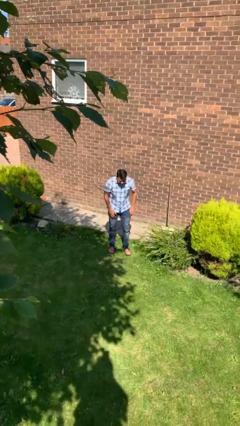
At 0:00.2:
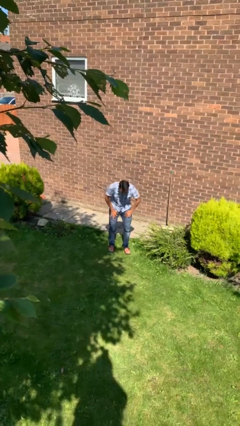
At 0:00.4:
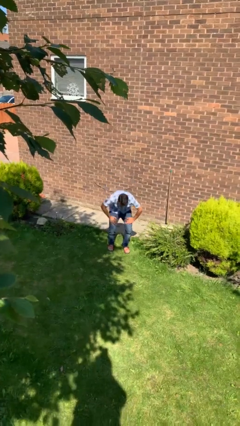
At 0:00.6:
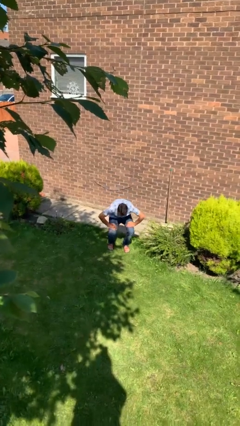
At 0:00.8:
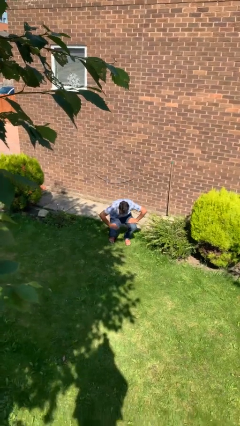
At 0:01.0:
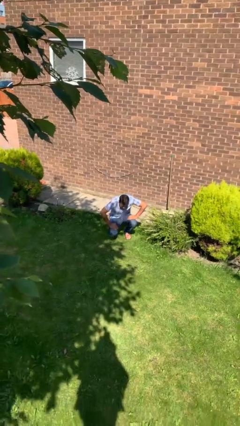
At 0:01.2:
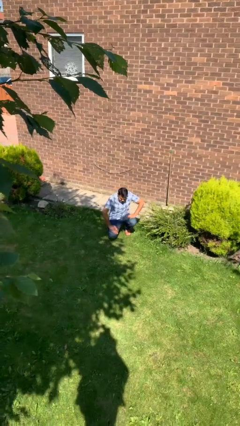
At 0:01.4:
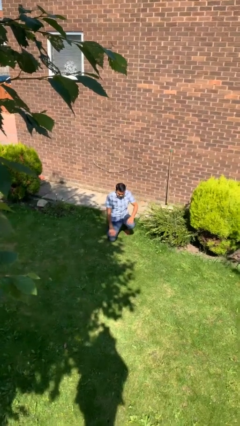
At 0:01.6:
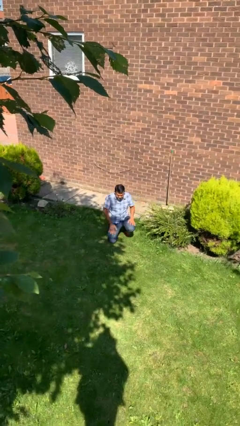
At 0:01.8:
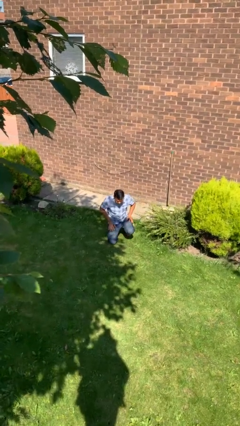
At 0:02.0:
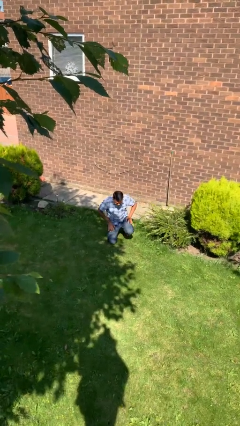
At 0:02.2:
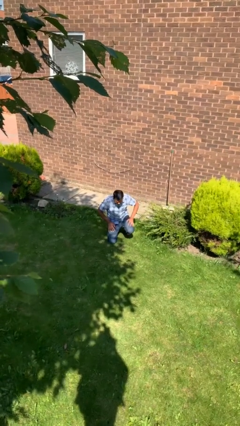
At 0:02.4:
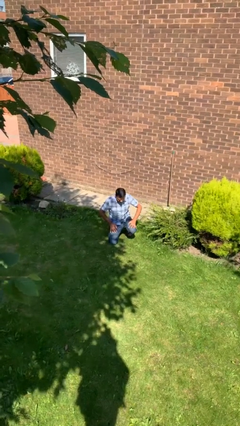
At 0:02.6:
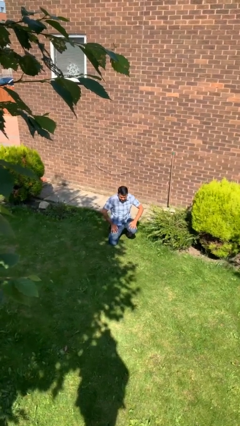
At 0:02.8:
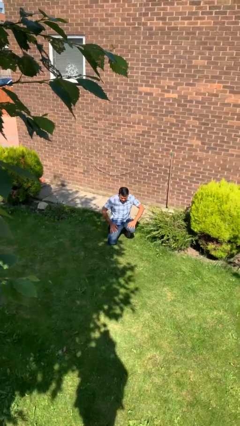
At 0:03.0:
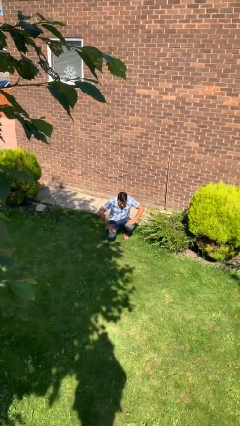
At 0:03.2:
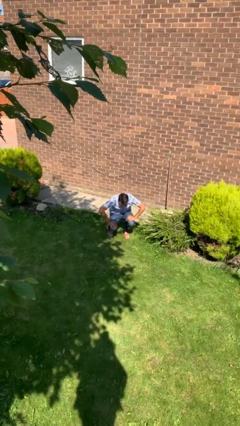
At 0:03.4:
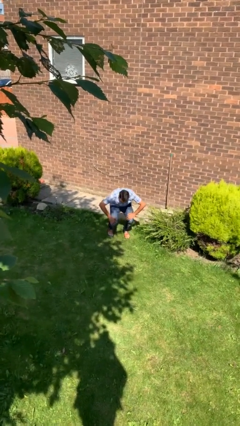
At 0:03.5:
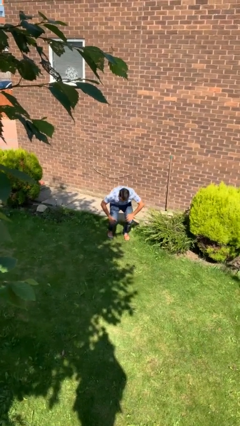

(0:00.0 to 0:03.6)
person kneels

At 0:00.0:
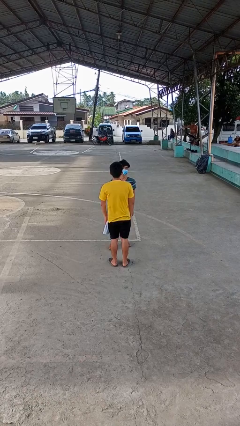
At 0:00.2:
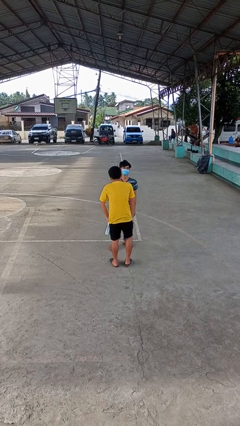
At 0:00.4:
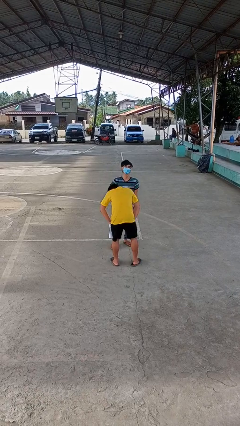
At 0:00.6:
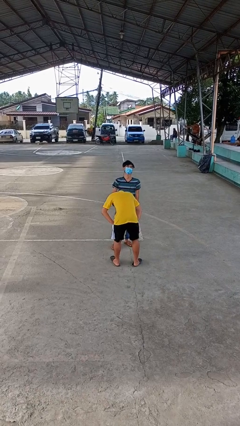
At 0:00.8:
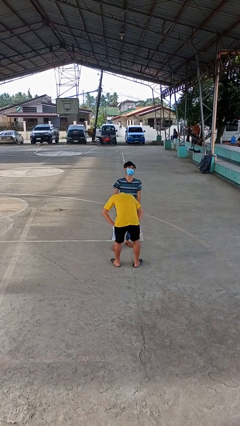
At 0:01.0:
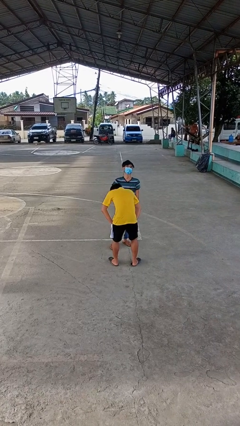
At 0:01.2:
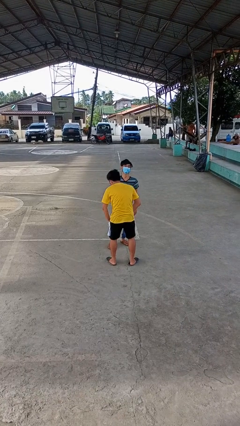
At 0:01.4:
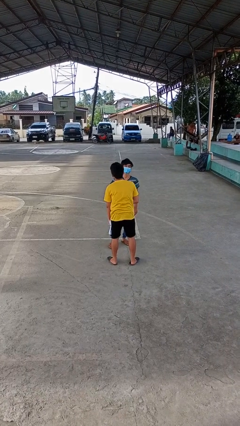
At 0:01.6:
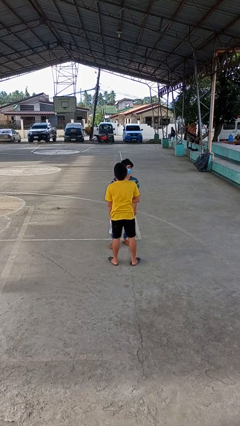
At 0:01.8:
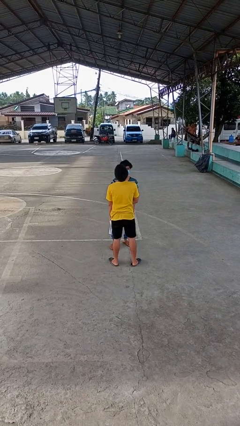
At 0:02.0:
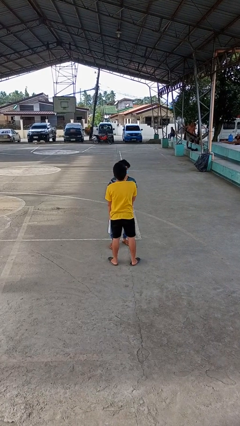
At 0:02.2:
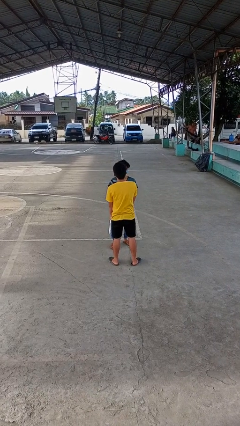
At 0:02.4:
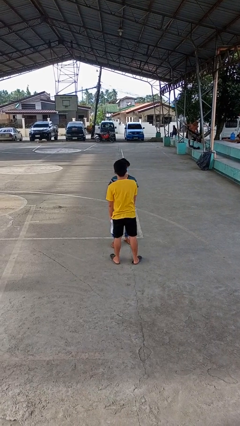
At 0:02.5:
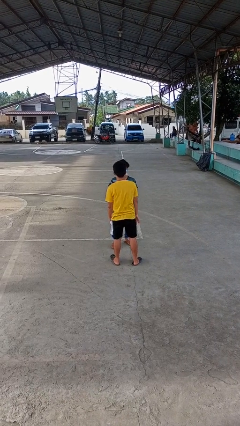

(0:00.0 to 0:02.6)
person laughs with person

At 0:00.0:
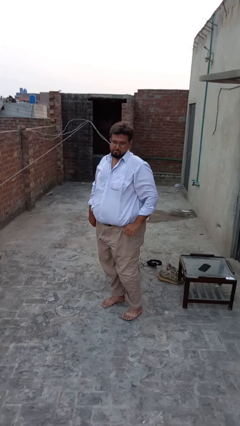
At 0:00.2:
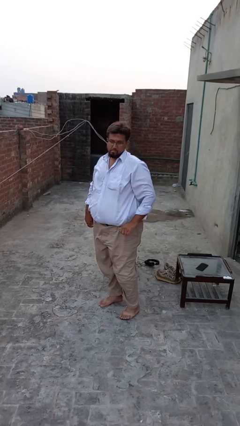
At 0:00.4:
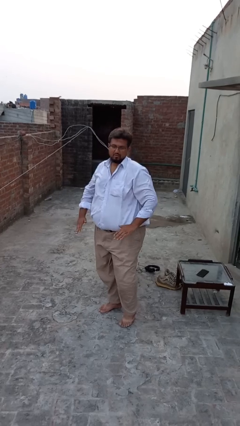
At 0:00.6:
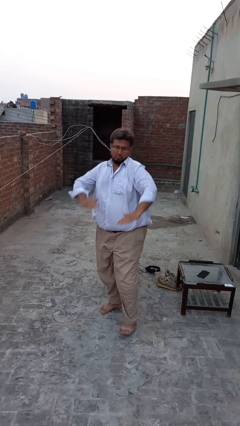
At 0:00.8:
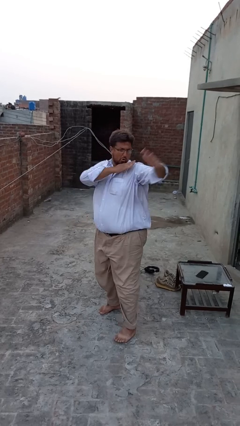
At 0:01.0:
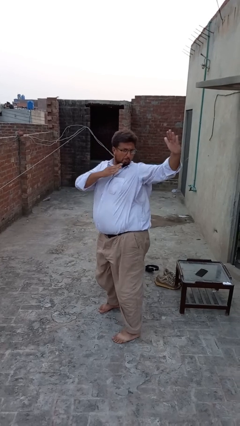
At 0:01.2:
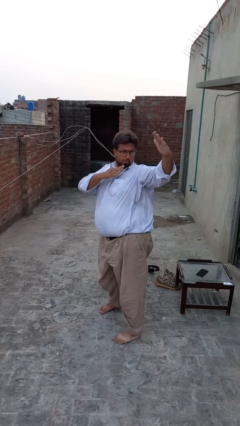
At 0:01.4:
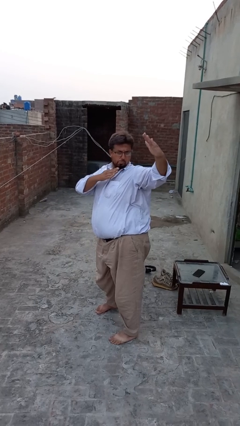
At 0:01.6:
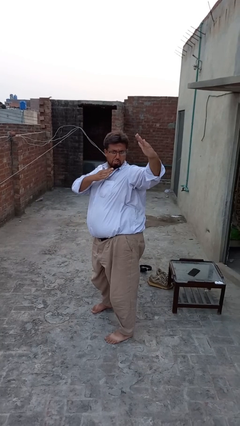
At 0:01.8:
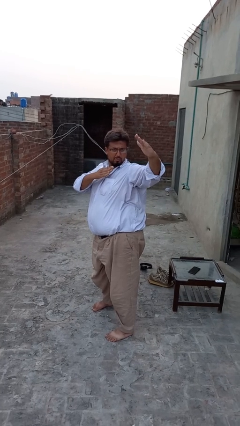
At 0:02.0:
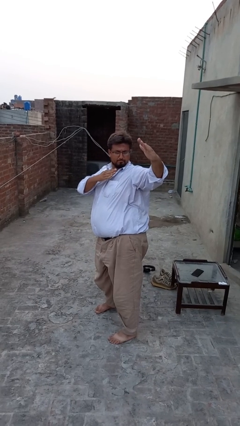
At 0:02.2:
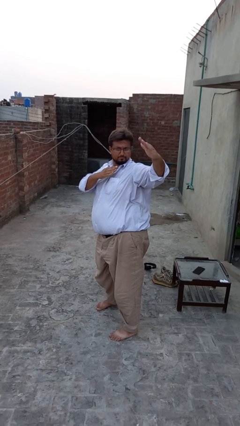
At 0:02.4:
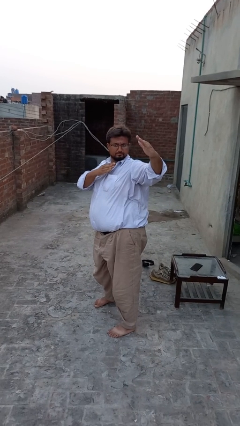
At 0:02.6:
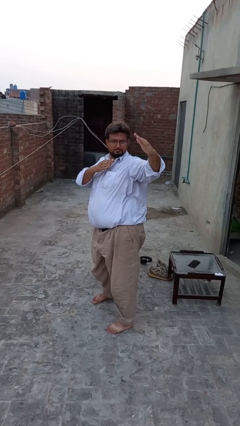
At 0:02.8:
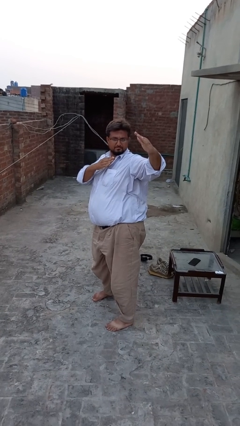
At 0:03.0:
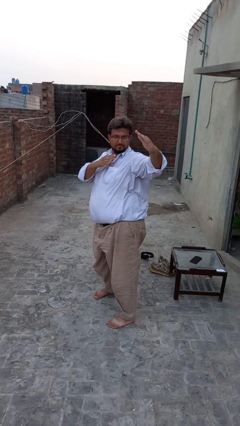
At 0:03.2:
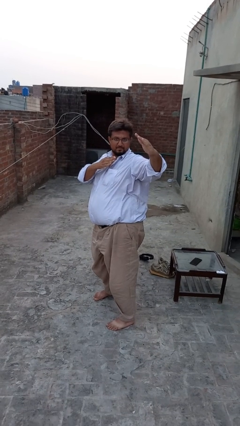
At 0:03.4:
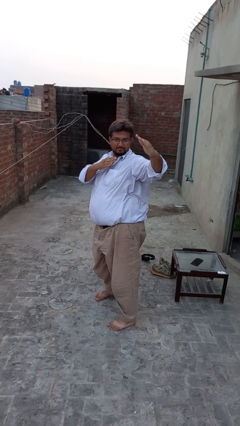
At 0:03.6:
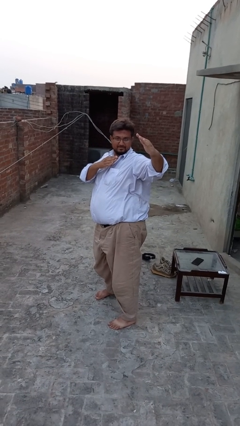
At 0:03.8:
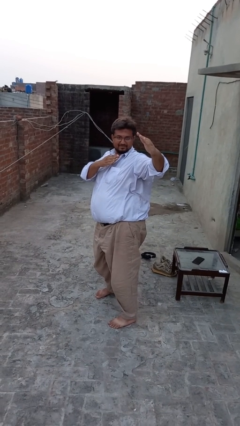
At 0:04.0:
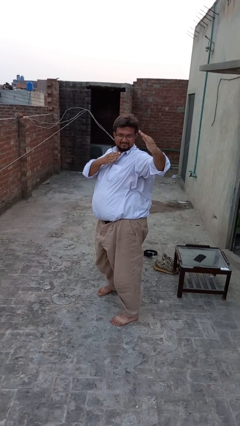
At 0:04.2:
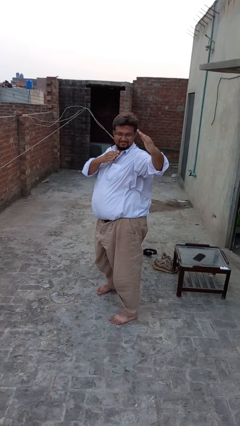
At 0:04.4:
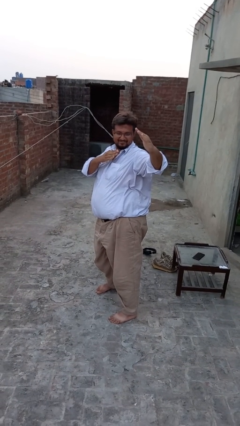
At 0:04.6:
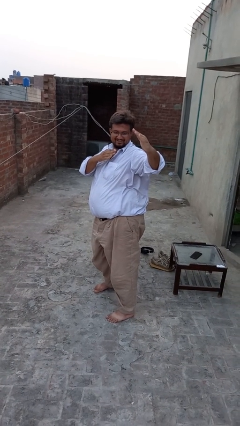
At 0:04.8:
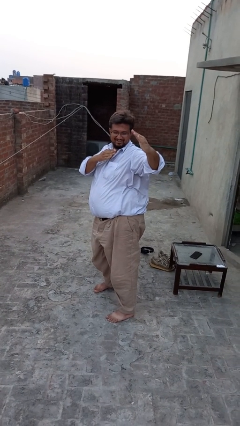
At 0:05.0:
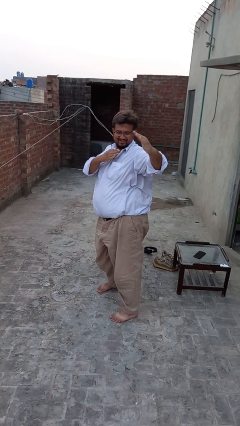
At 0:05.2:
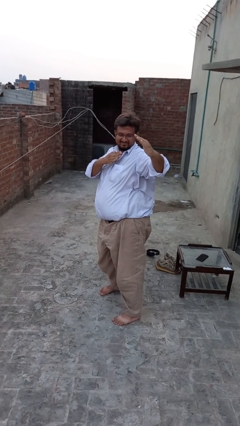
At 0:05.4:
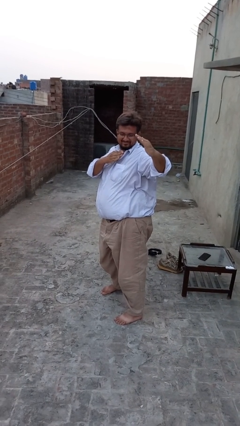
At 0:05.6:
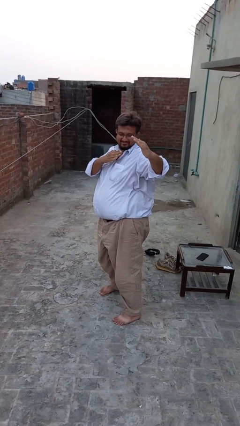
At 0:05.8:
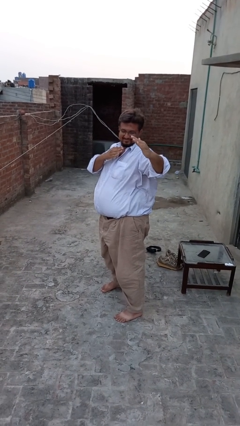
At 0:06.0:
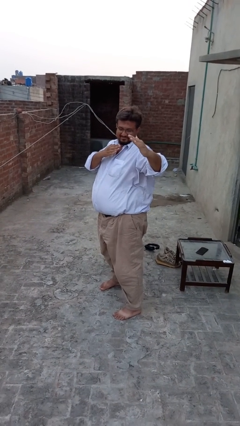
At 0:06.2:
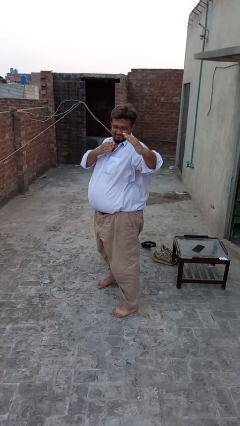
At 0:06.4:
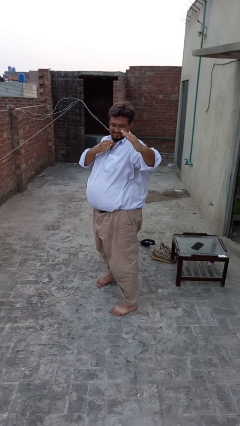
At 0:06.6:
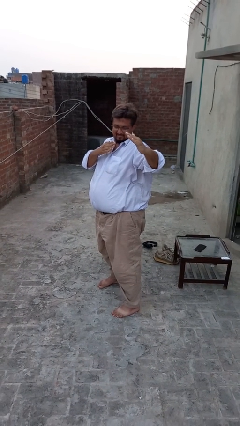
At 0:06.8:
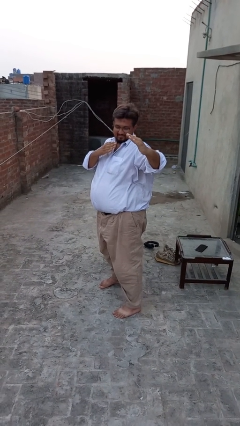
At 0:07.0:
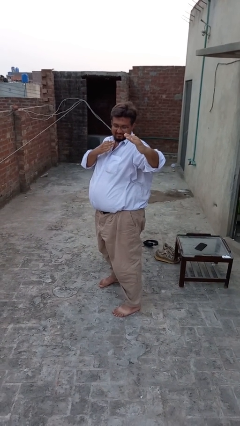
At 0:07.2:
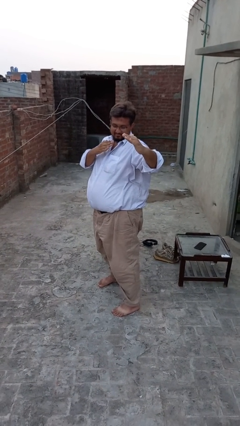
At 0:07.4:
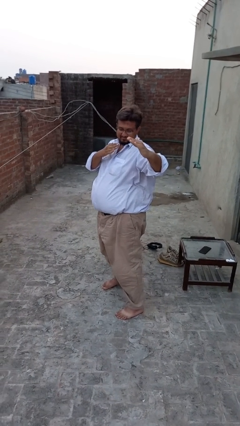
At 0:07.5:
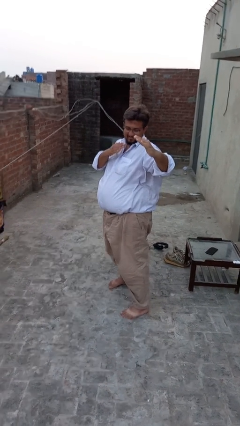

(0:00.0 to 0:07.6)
person karate chop

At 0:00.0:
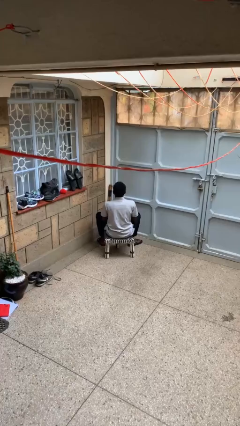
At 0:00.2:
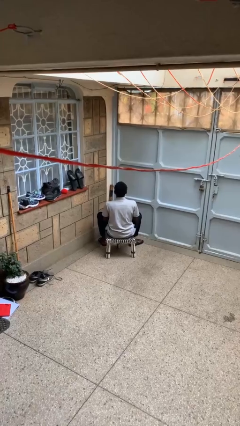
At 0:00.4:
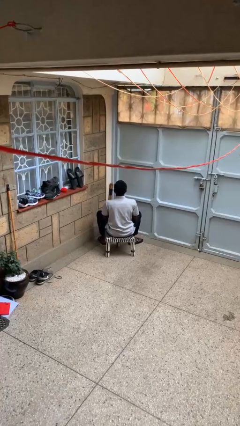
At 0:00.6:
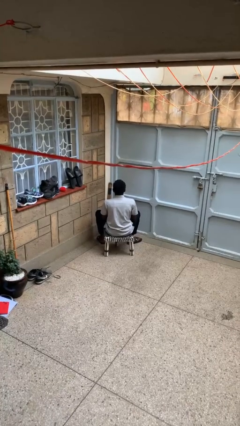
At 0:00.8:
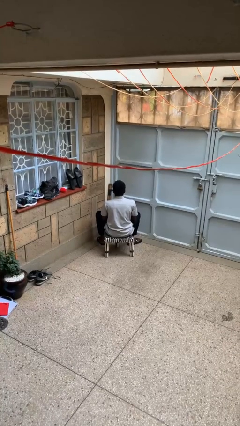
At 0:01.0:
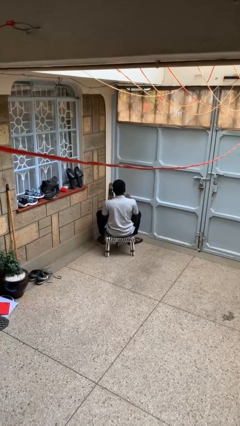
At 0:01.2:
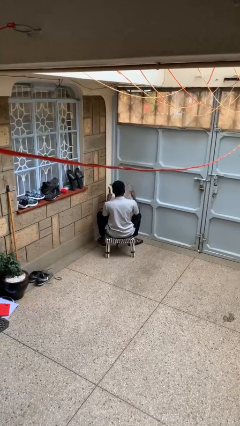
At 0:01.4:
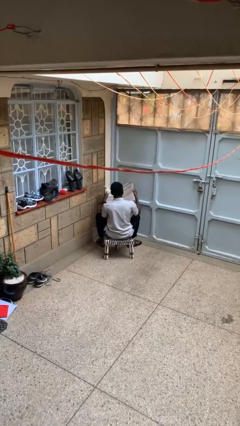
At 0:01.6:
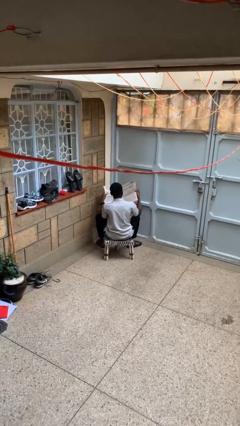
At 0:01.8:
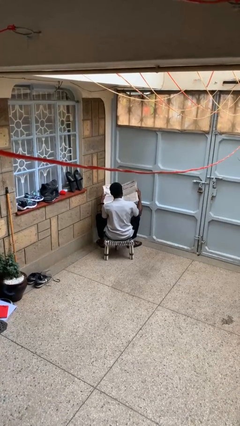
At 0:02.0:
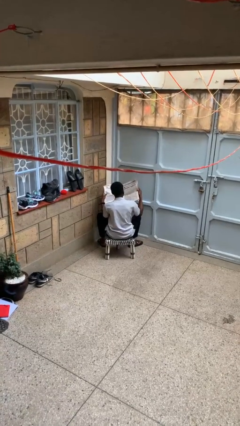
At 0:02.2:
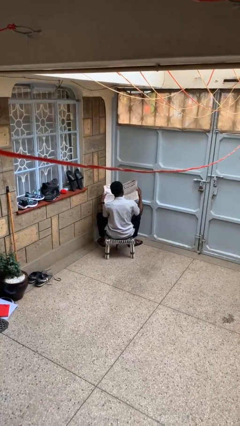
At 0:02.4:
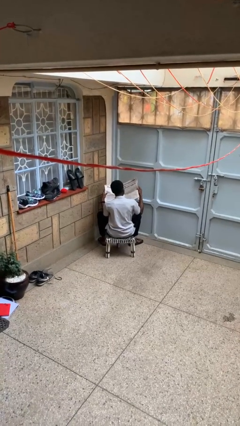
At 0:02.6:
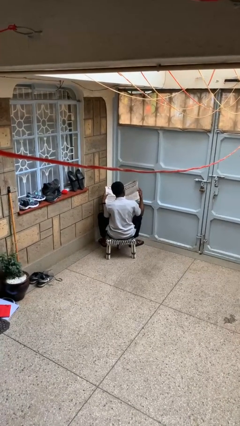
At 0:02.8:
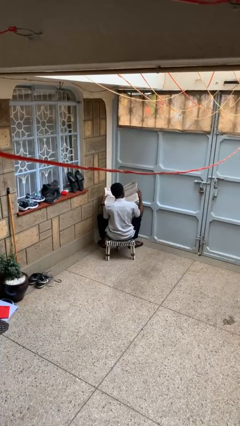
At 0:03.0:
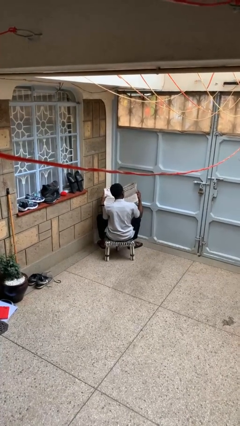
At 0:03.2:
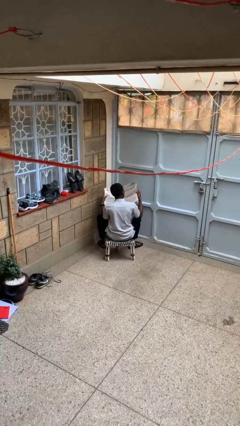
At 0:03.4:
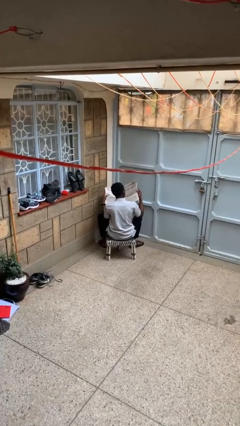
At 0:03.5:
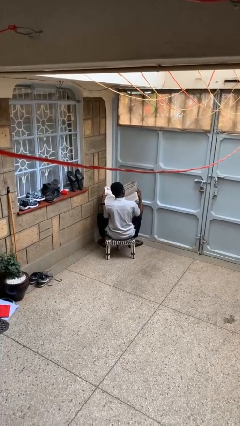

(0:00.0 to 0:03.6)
person reads newspaper

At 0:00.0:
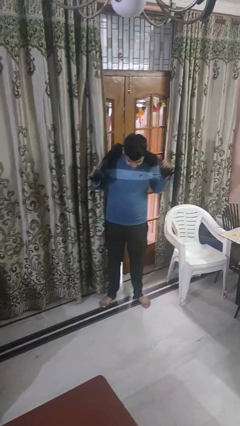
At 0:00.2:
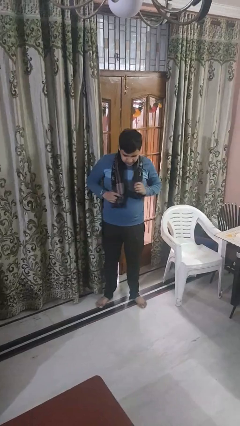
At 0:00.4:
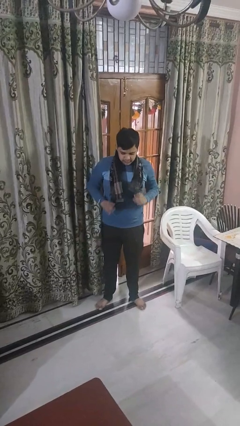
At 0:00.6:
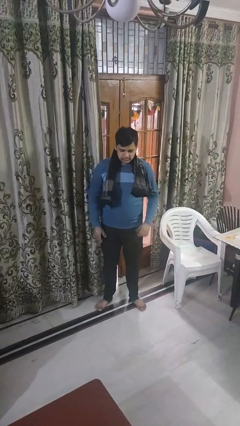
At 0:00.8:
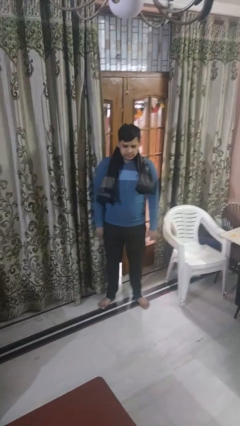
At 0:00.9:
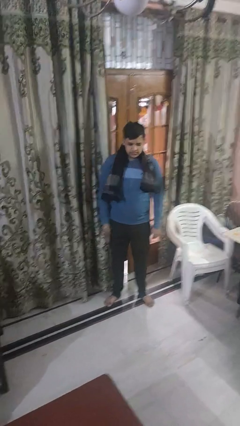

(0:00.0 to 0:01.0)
person puts on scarf
